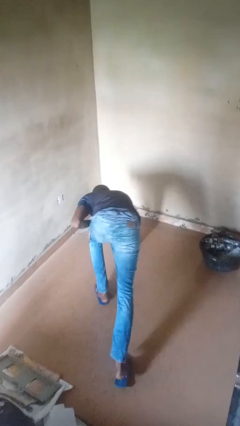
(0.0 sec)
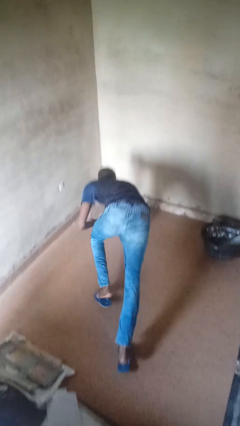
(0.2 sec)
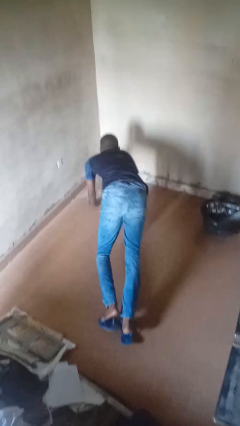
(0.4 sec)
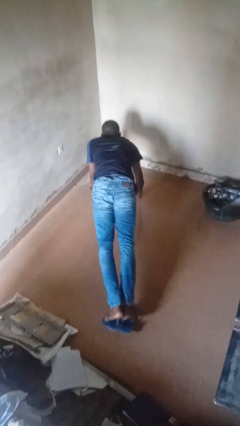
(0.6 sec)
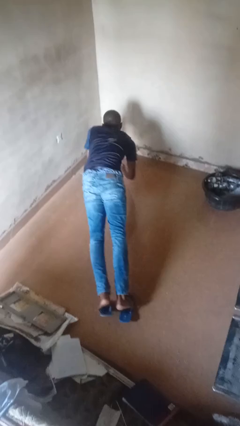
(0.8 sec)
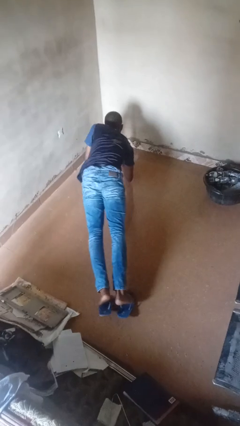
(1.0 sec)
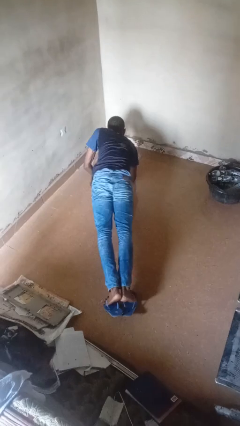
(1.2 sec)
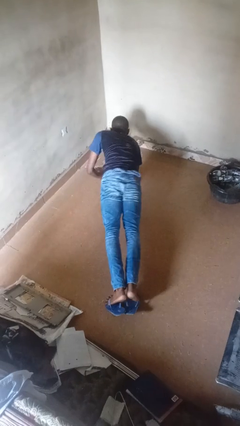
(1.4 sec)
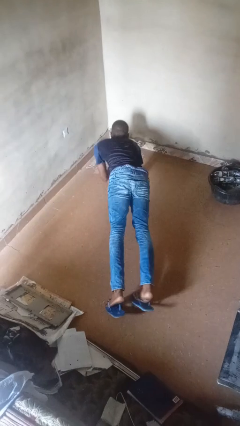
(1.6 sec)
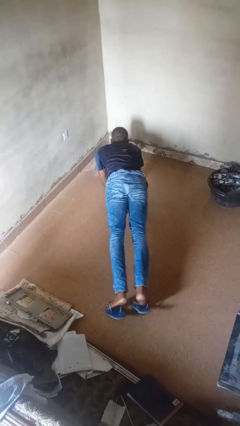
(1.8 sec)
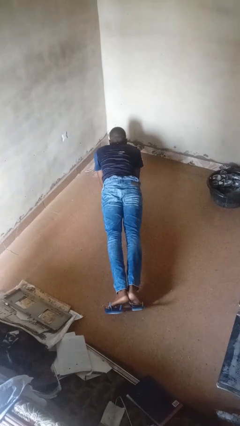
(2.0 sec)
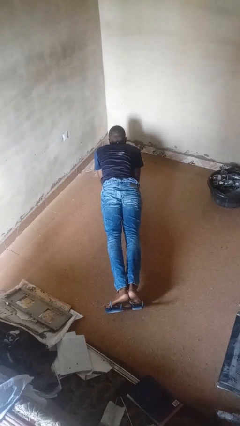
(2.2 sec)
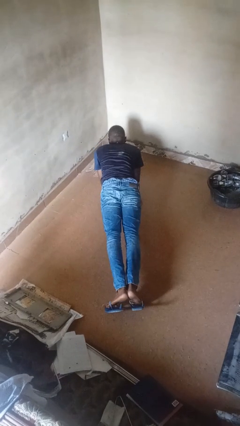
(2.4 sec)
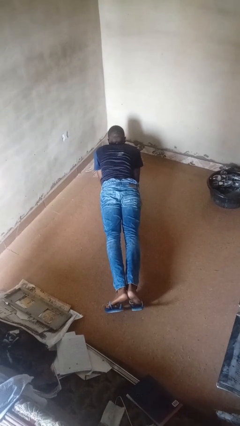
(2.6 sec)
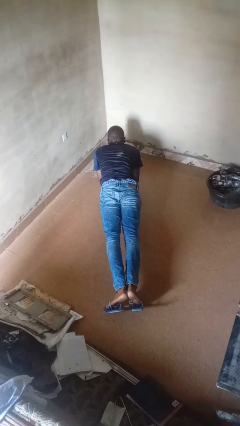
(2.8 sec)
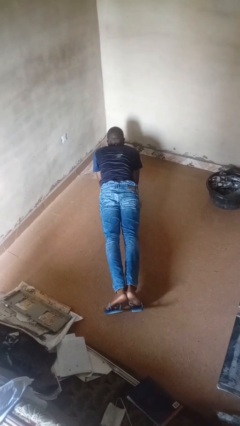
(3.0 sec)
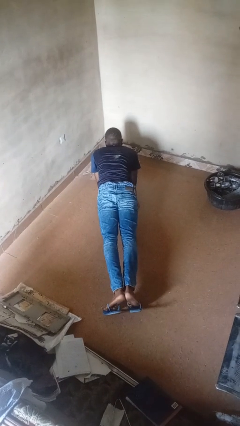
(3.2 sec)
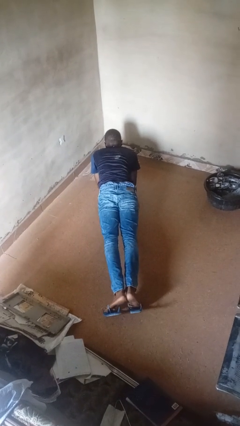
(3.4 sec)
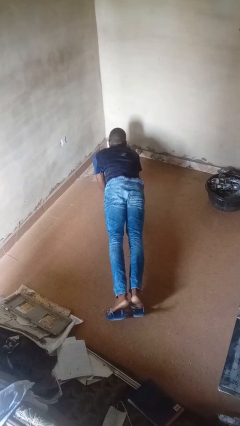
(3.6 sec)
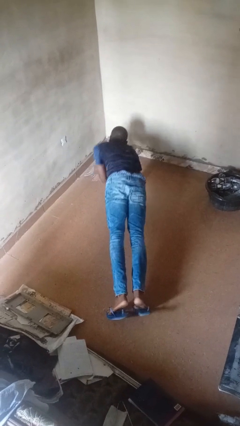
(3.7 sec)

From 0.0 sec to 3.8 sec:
person exercises with plank

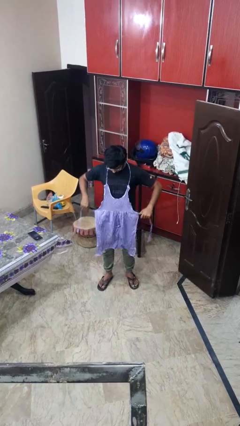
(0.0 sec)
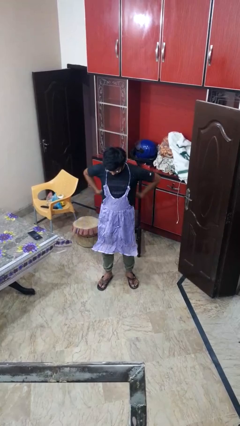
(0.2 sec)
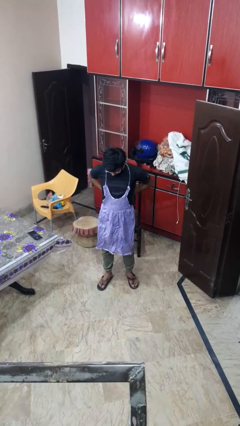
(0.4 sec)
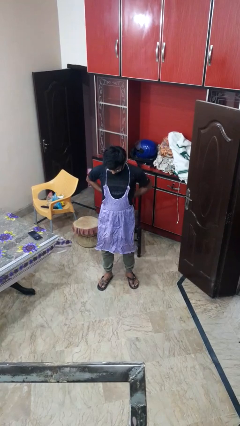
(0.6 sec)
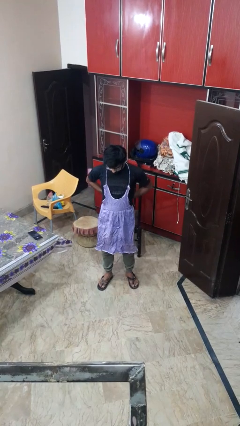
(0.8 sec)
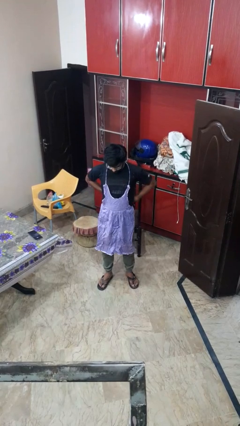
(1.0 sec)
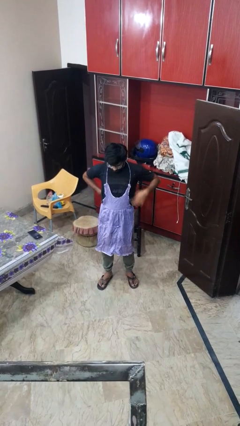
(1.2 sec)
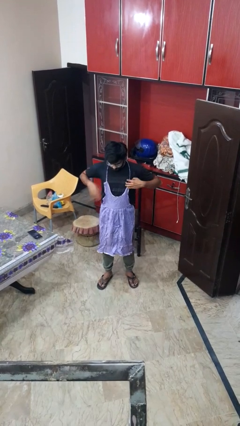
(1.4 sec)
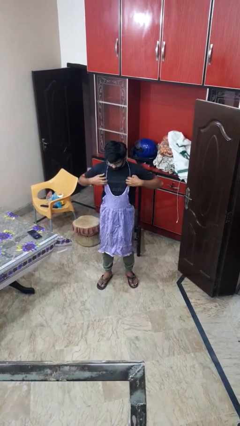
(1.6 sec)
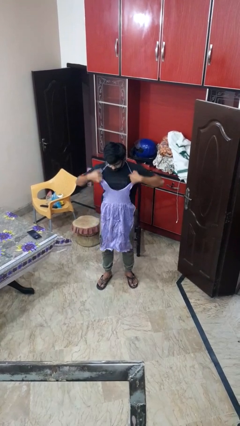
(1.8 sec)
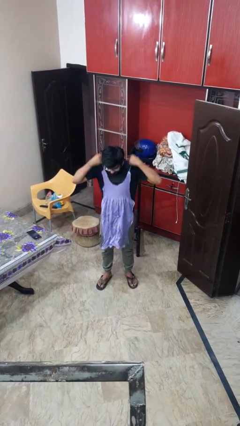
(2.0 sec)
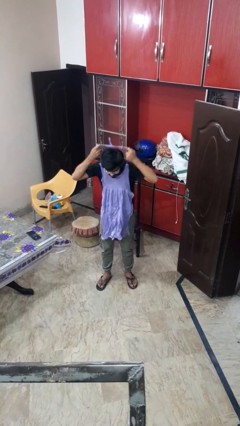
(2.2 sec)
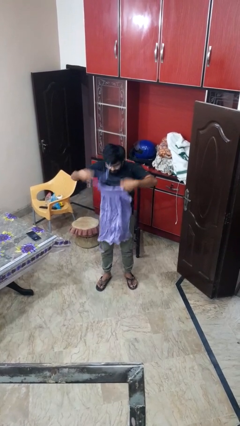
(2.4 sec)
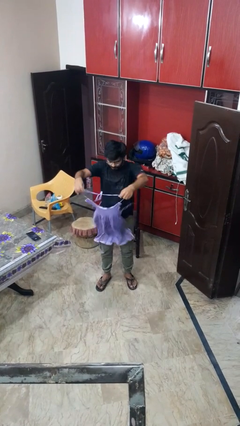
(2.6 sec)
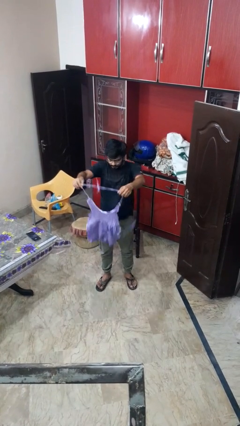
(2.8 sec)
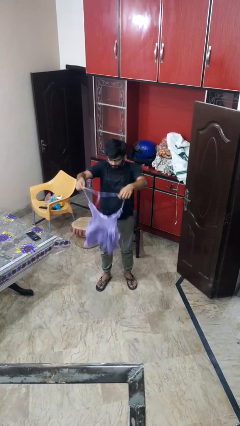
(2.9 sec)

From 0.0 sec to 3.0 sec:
person takes off apron

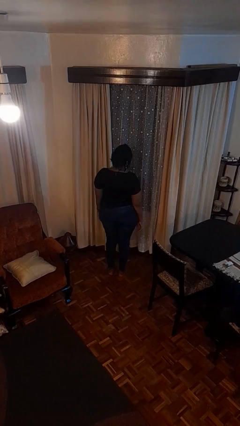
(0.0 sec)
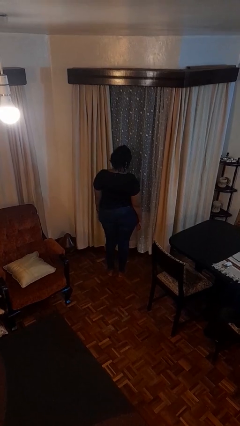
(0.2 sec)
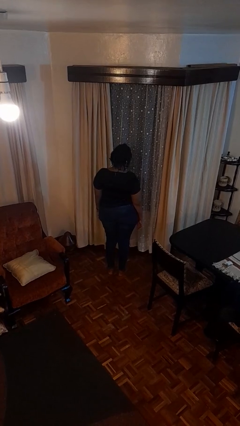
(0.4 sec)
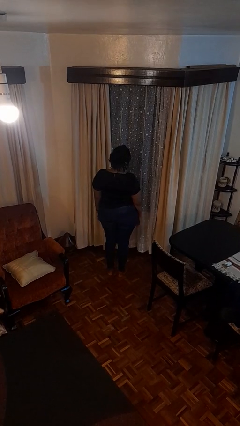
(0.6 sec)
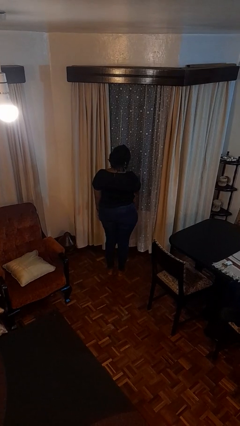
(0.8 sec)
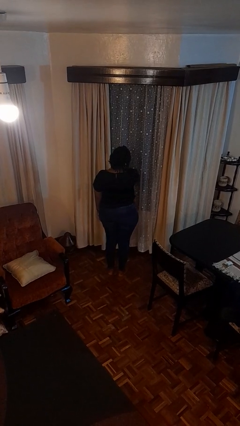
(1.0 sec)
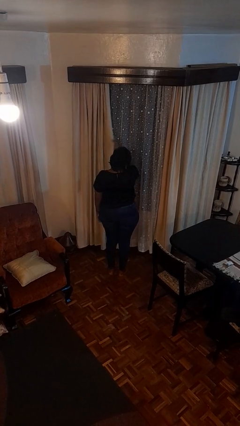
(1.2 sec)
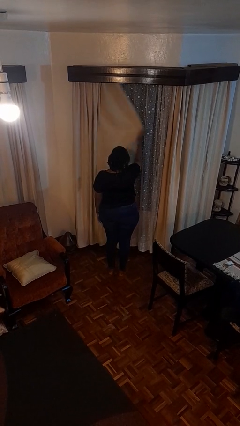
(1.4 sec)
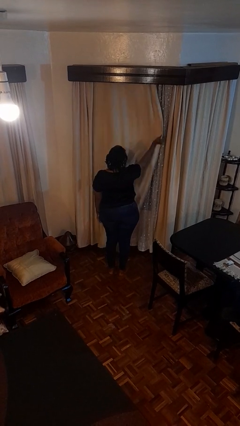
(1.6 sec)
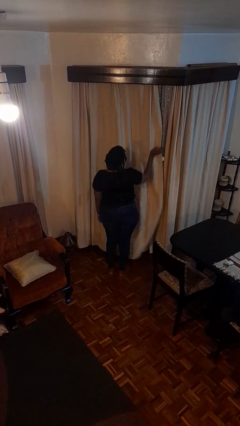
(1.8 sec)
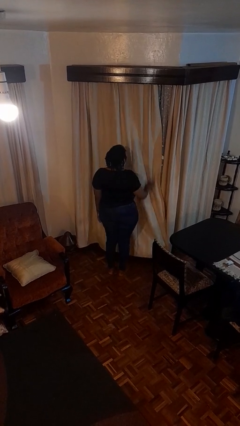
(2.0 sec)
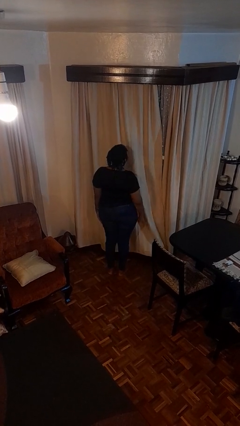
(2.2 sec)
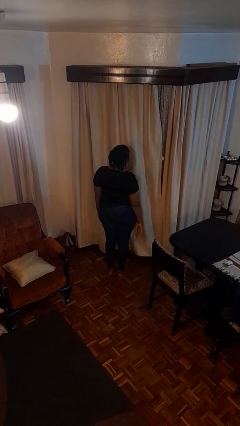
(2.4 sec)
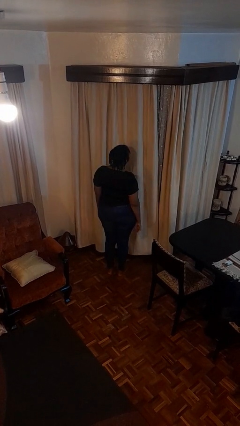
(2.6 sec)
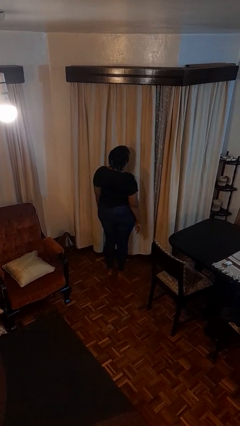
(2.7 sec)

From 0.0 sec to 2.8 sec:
person closes curtains

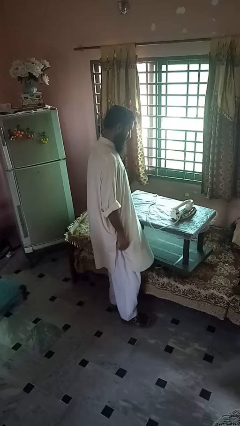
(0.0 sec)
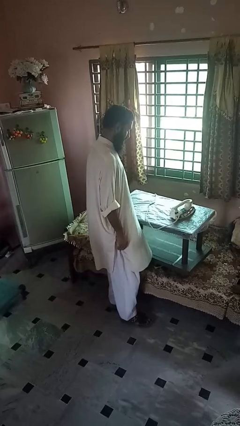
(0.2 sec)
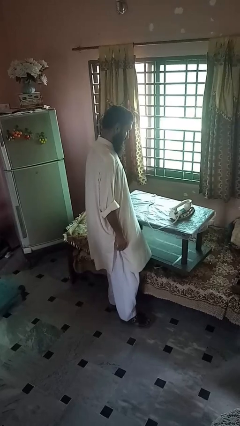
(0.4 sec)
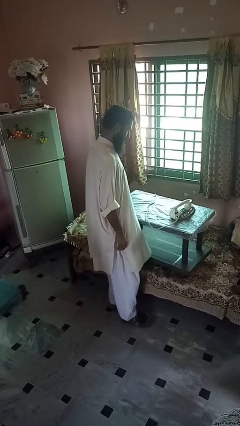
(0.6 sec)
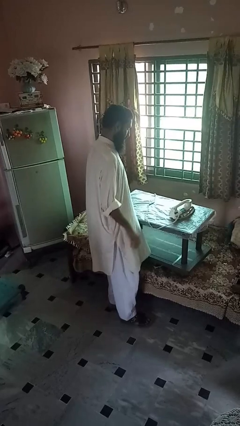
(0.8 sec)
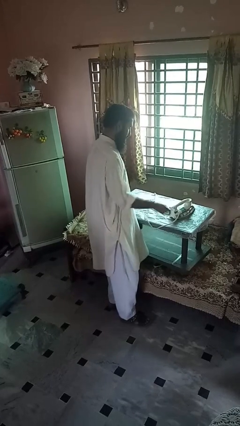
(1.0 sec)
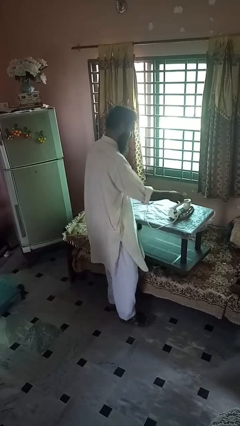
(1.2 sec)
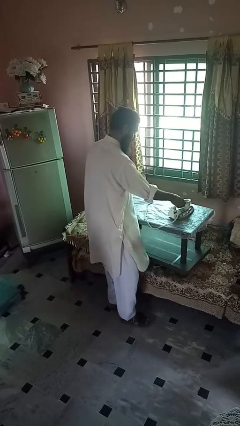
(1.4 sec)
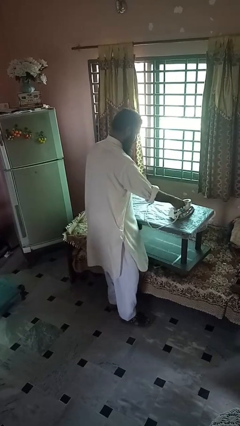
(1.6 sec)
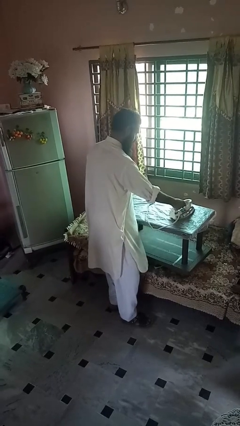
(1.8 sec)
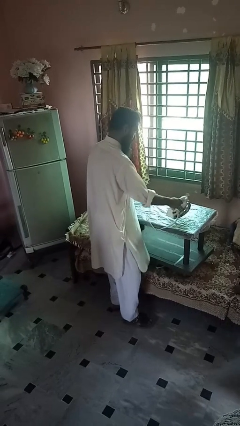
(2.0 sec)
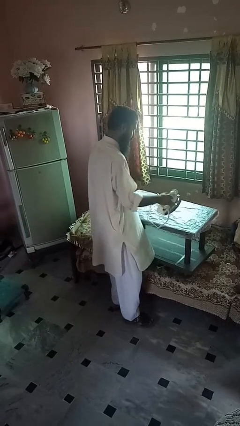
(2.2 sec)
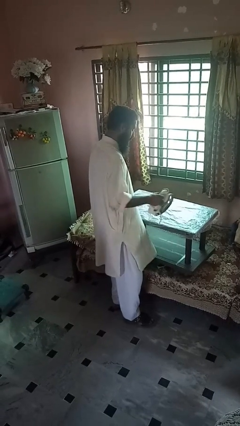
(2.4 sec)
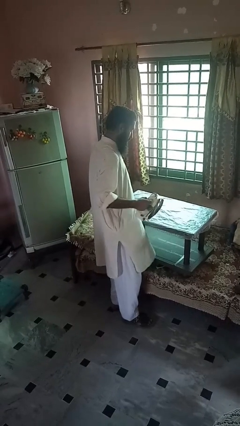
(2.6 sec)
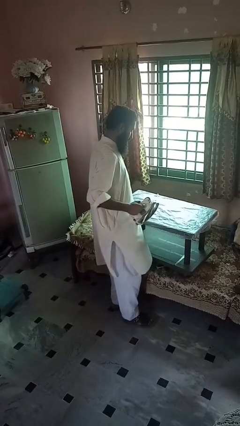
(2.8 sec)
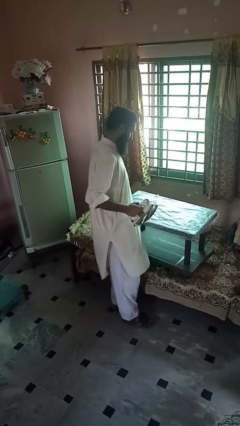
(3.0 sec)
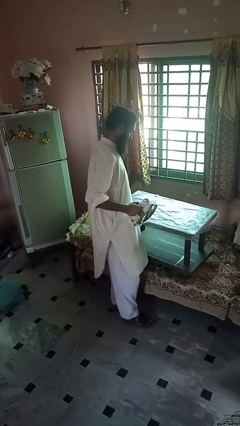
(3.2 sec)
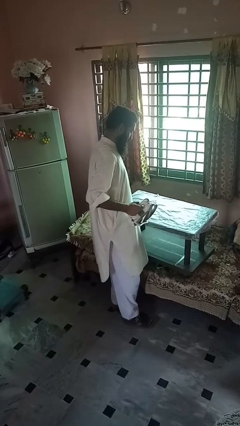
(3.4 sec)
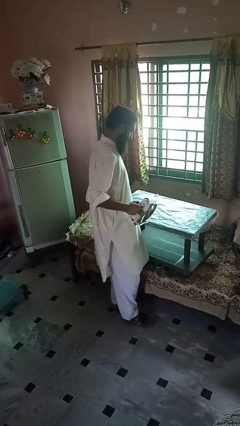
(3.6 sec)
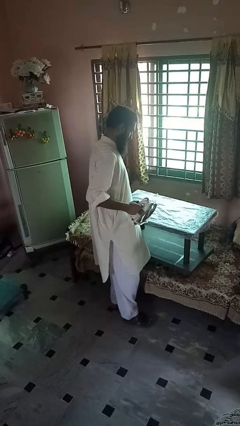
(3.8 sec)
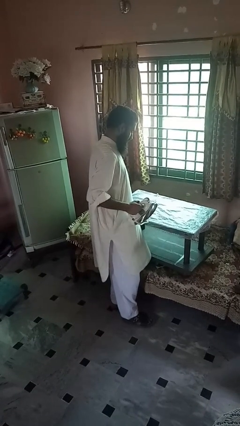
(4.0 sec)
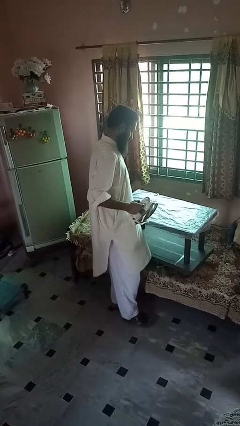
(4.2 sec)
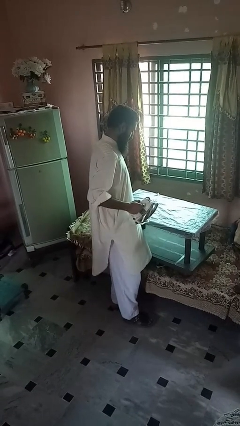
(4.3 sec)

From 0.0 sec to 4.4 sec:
person picks up object from countertop

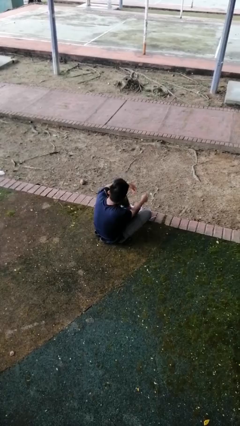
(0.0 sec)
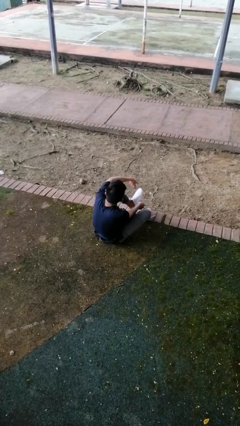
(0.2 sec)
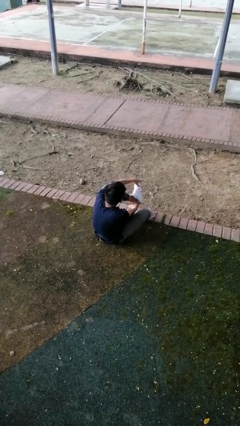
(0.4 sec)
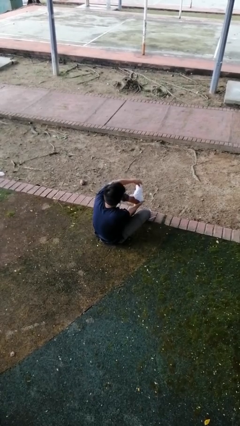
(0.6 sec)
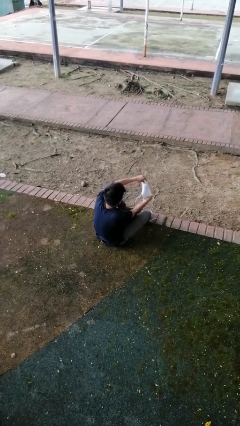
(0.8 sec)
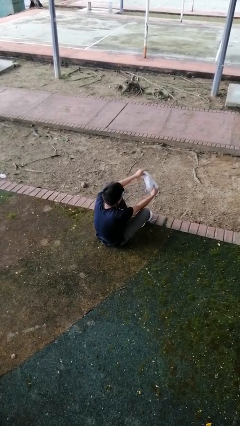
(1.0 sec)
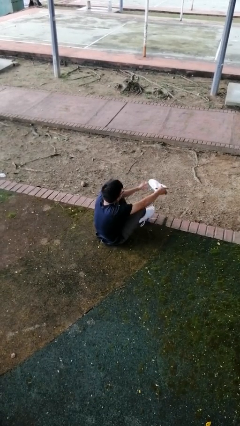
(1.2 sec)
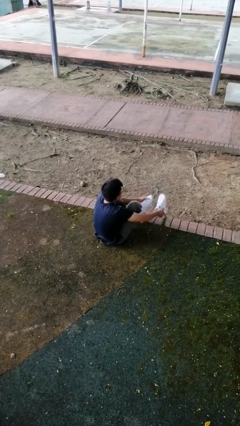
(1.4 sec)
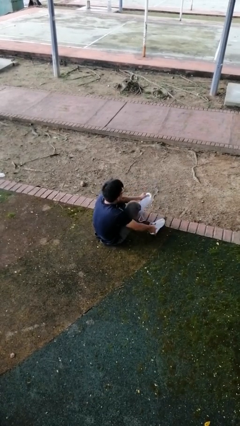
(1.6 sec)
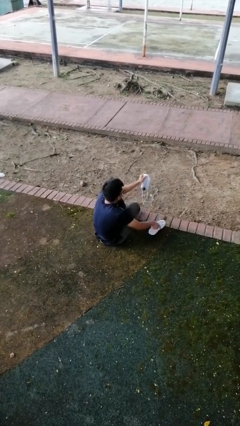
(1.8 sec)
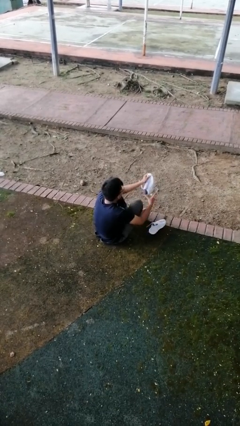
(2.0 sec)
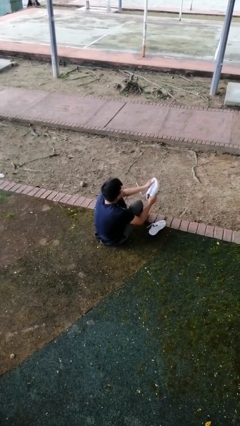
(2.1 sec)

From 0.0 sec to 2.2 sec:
person takes off shoes

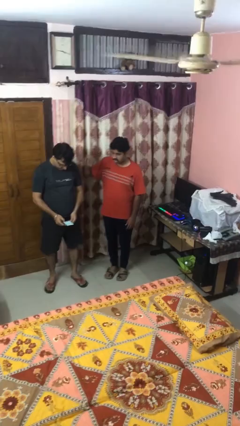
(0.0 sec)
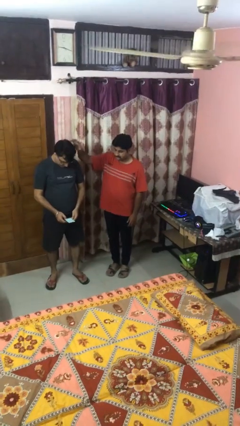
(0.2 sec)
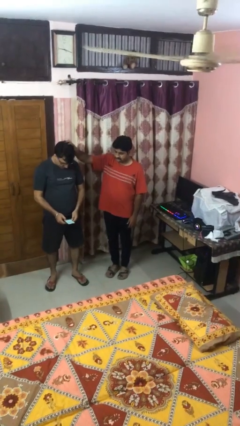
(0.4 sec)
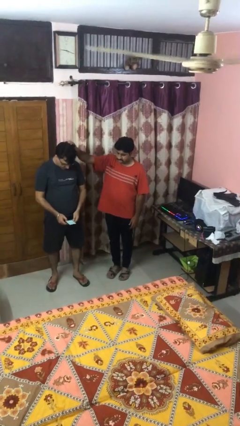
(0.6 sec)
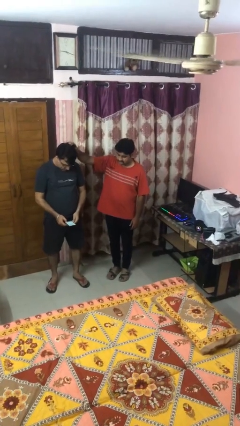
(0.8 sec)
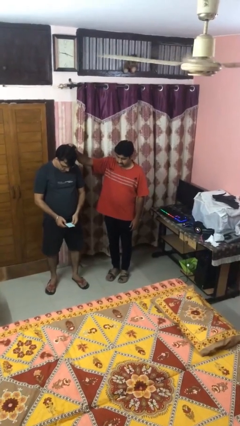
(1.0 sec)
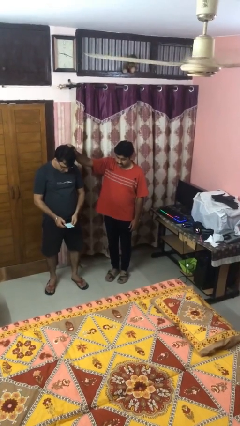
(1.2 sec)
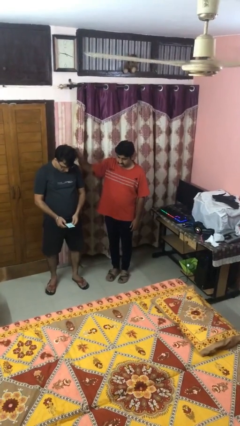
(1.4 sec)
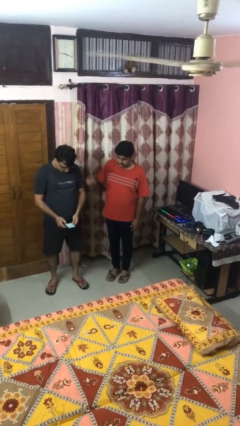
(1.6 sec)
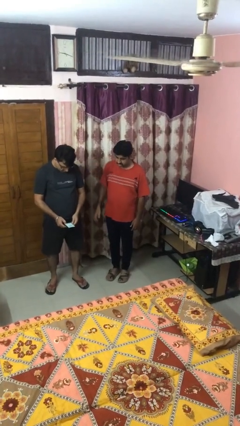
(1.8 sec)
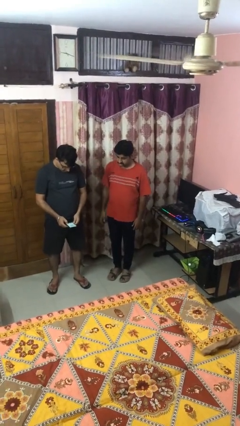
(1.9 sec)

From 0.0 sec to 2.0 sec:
person grabs person by hair
